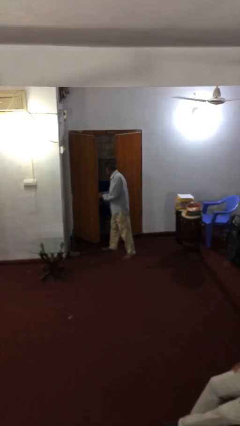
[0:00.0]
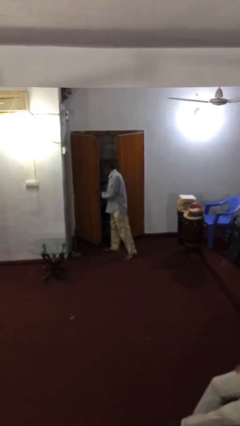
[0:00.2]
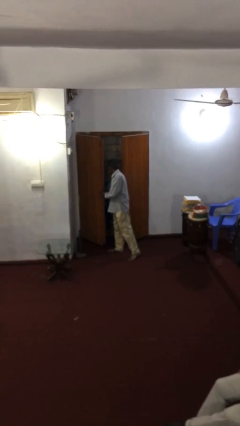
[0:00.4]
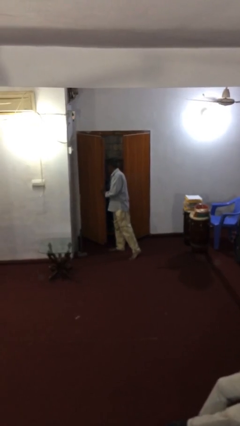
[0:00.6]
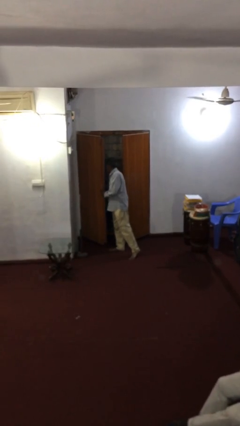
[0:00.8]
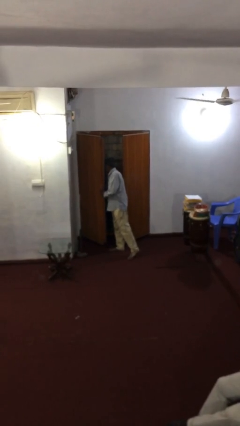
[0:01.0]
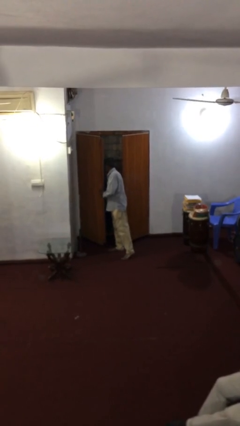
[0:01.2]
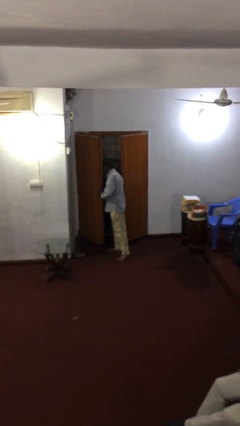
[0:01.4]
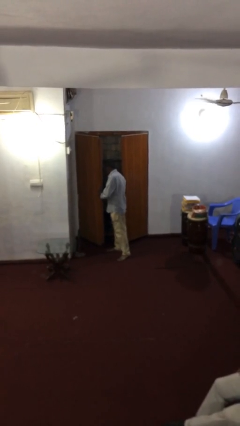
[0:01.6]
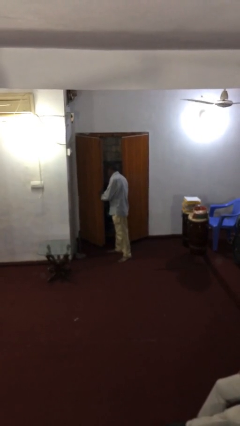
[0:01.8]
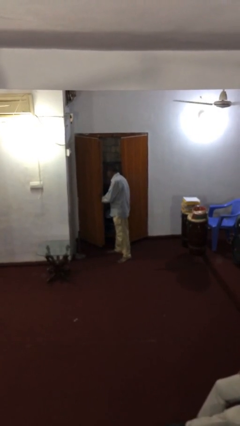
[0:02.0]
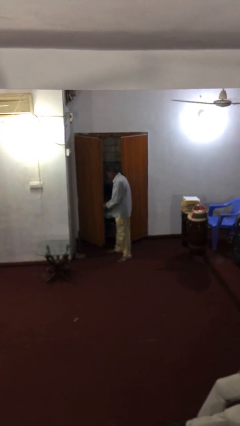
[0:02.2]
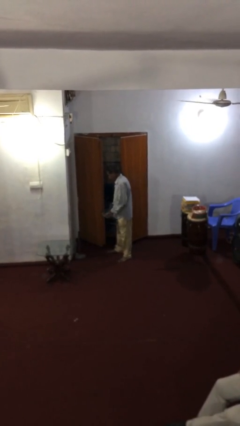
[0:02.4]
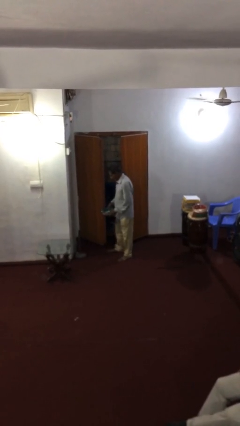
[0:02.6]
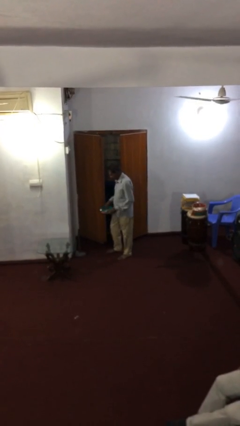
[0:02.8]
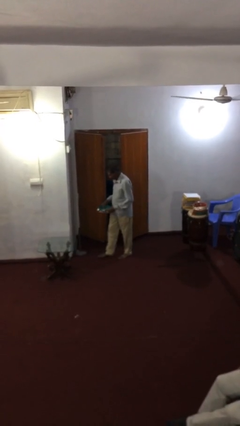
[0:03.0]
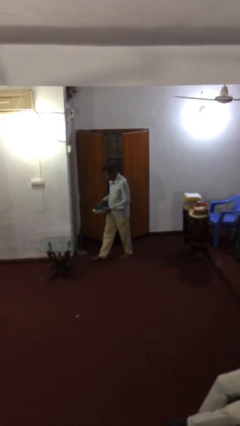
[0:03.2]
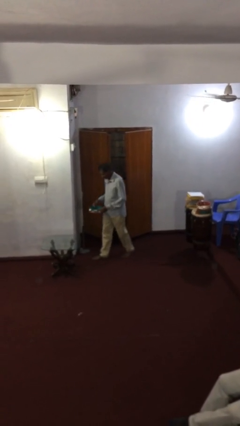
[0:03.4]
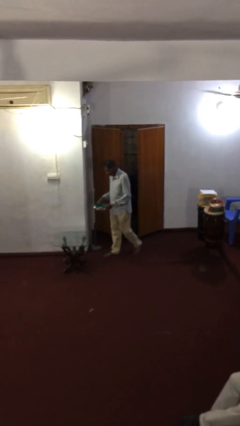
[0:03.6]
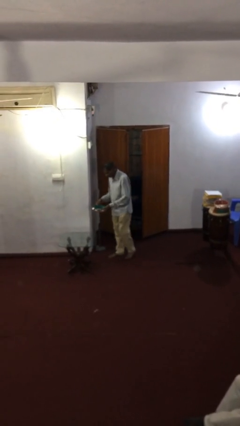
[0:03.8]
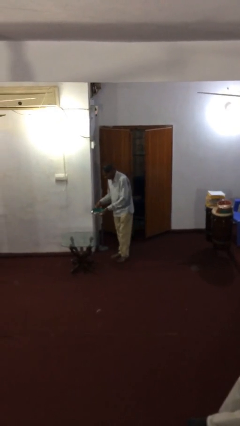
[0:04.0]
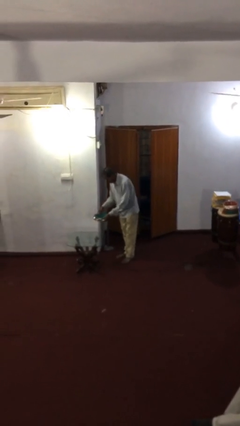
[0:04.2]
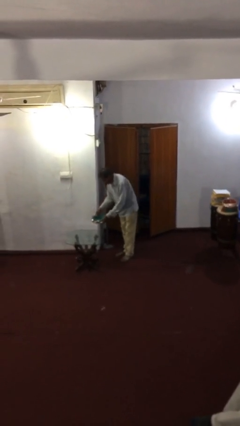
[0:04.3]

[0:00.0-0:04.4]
person picks up object from shelf

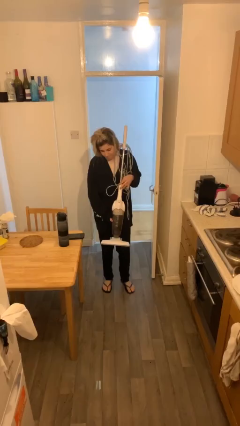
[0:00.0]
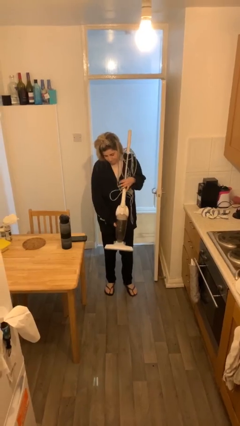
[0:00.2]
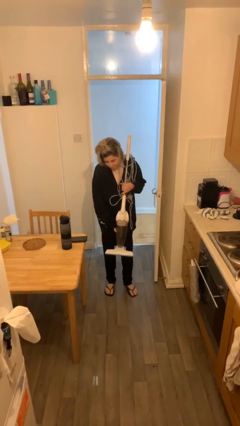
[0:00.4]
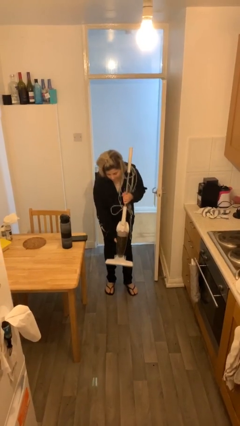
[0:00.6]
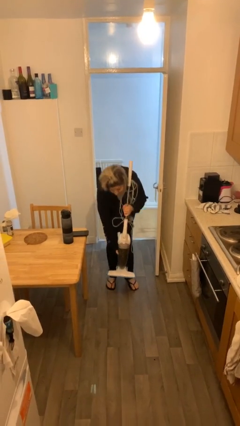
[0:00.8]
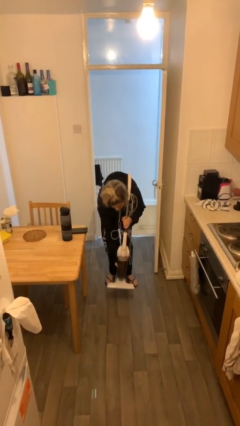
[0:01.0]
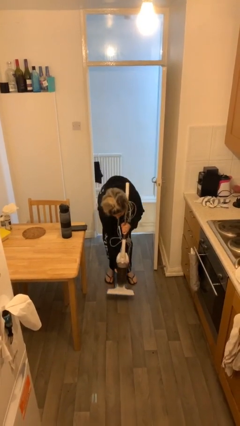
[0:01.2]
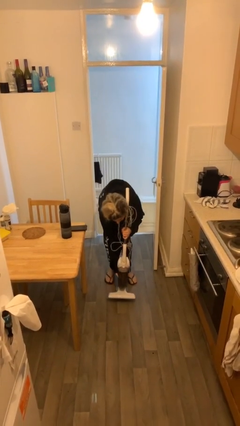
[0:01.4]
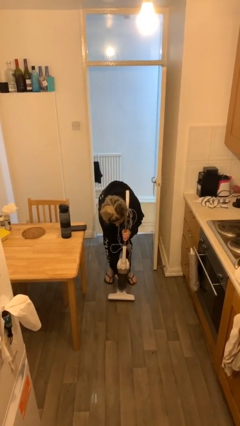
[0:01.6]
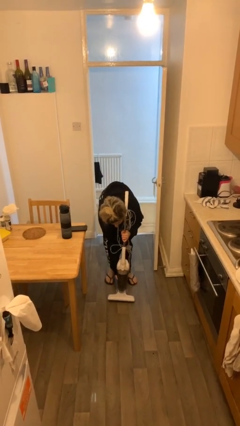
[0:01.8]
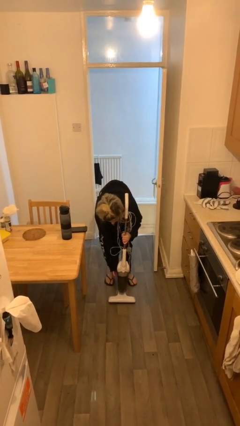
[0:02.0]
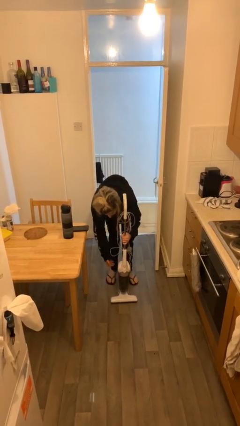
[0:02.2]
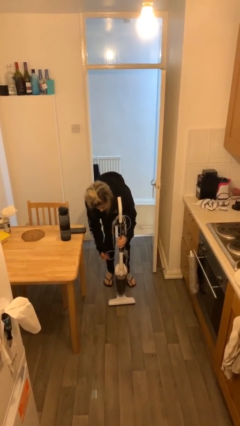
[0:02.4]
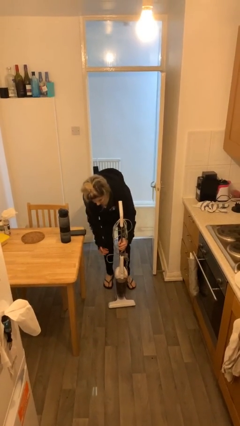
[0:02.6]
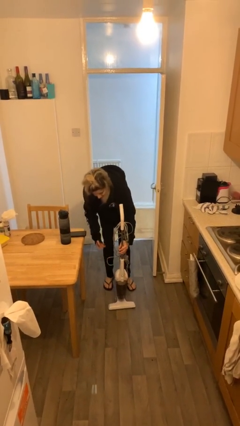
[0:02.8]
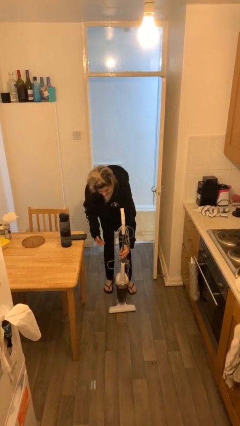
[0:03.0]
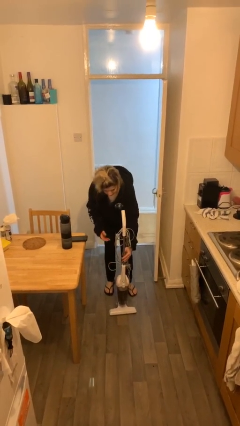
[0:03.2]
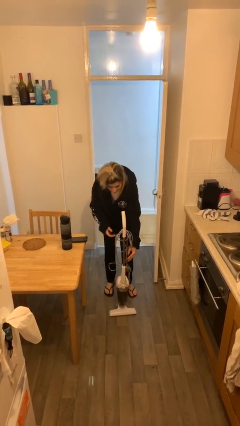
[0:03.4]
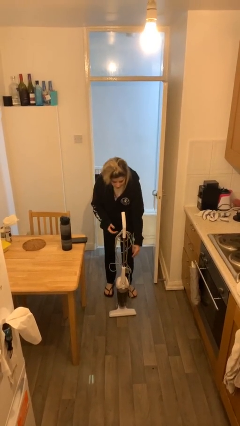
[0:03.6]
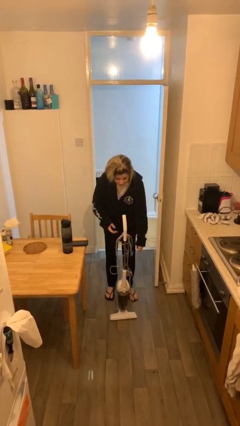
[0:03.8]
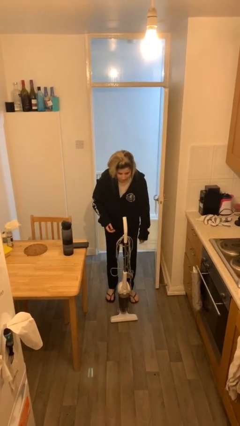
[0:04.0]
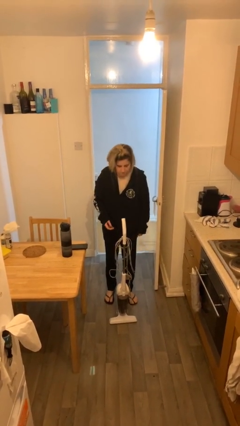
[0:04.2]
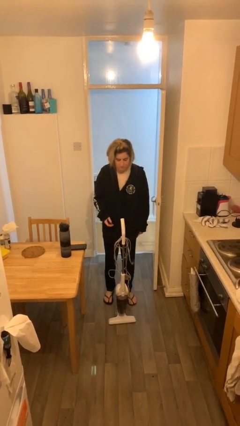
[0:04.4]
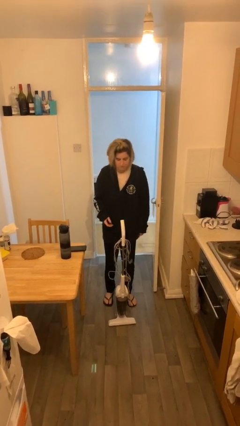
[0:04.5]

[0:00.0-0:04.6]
person puts down object on floor

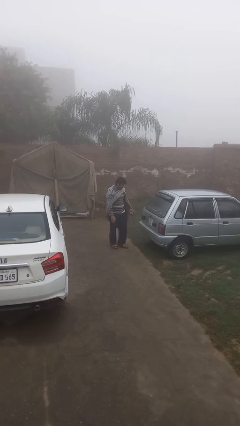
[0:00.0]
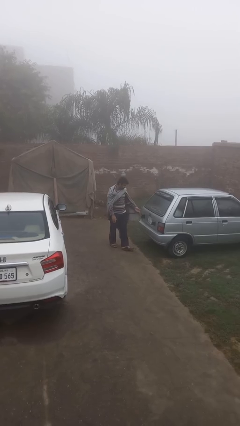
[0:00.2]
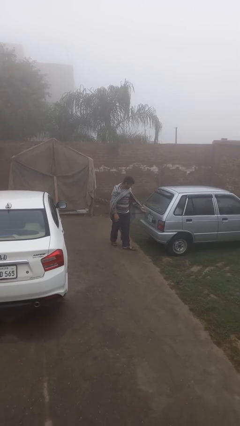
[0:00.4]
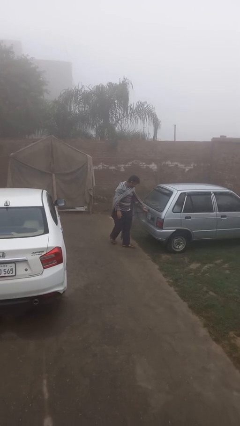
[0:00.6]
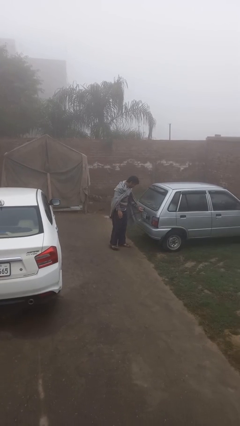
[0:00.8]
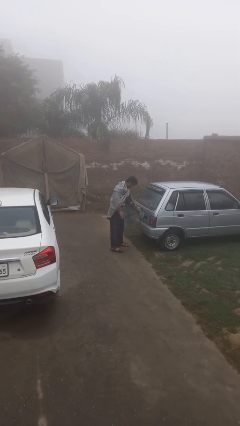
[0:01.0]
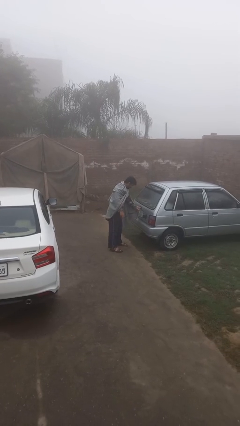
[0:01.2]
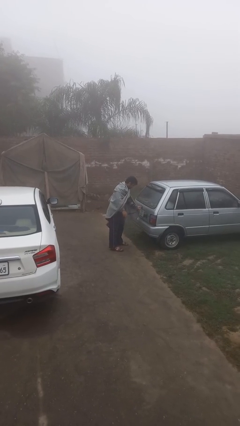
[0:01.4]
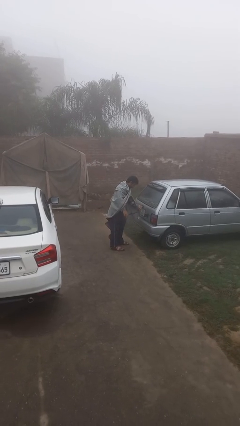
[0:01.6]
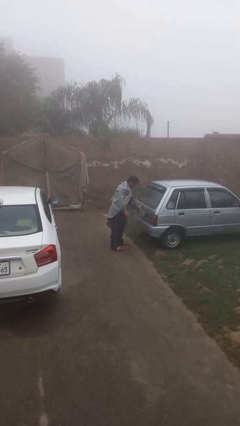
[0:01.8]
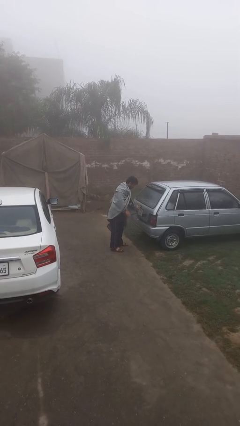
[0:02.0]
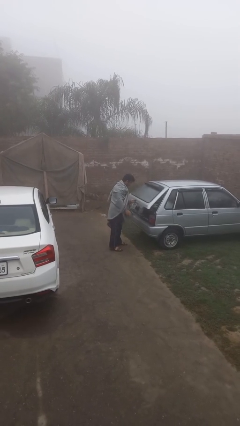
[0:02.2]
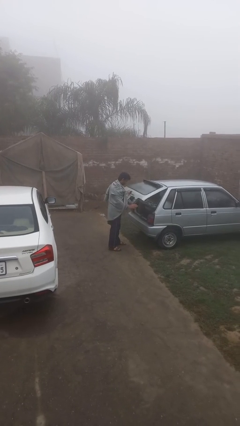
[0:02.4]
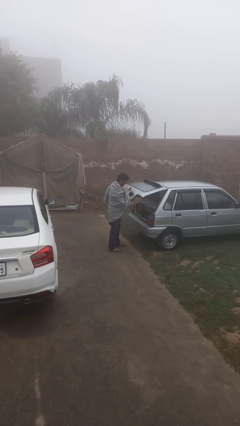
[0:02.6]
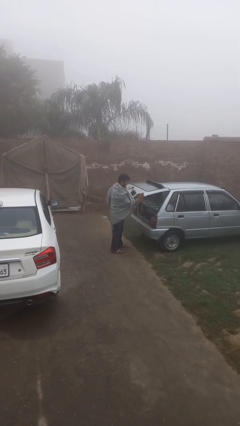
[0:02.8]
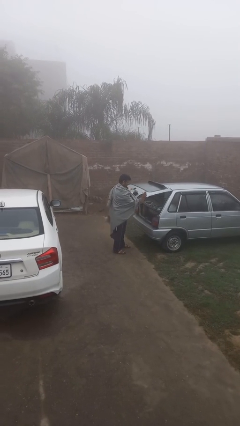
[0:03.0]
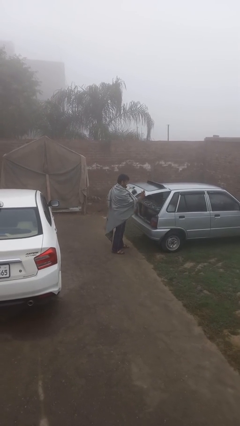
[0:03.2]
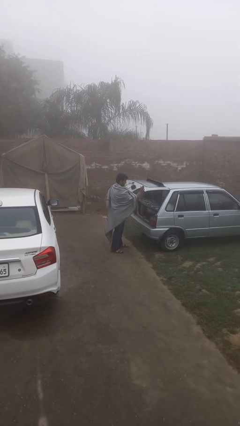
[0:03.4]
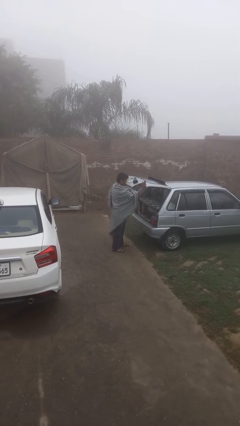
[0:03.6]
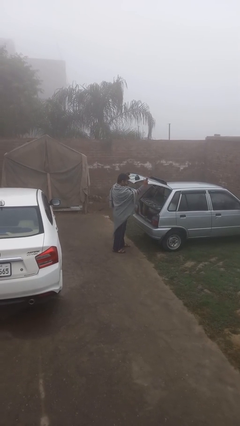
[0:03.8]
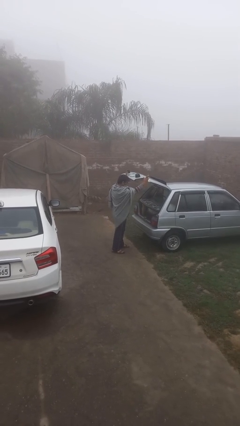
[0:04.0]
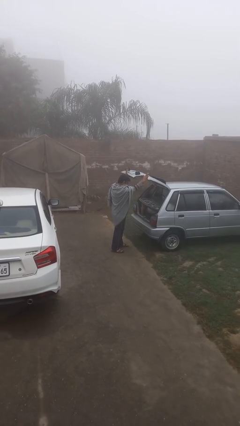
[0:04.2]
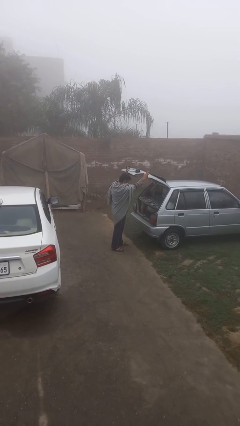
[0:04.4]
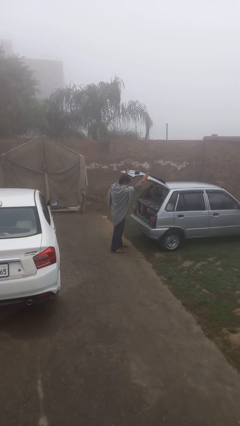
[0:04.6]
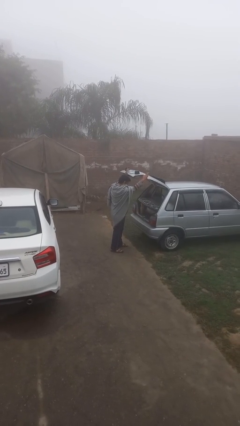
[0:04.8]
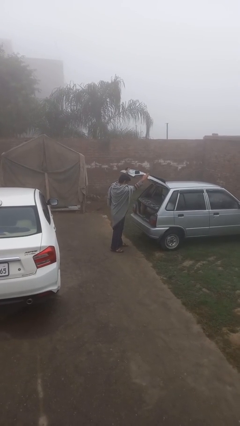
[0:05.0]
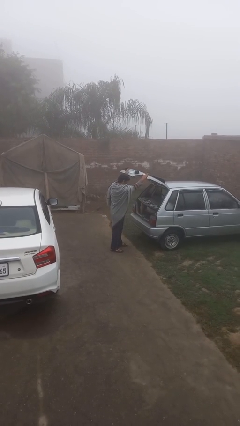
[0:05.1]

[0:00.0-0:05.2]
person opens car trunk

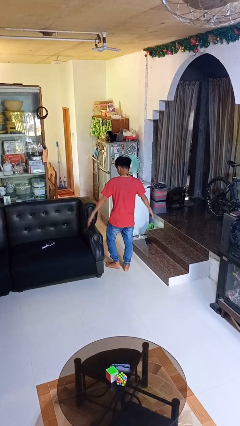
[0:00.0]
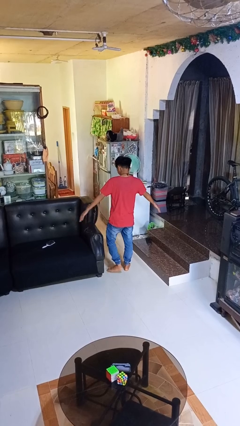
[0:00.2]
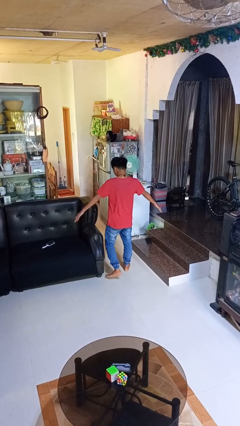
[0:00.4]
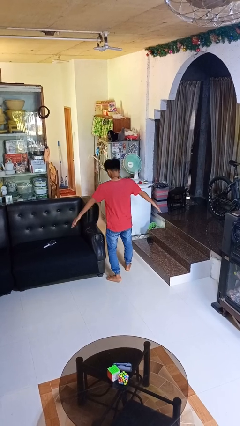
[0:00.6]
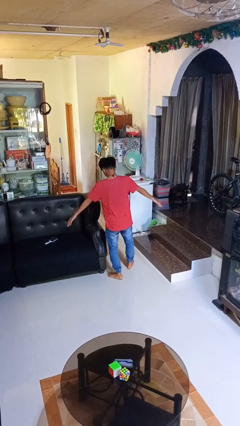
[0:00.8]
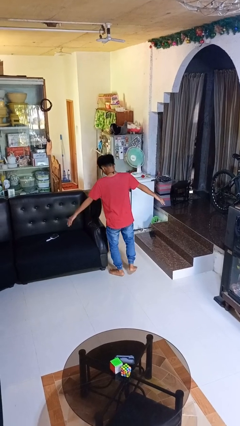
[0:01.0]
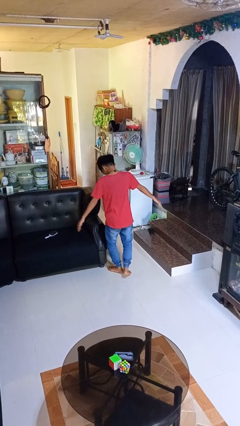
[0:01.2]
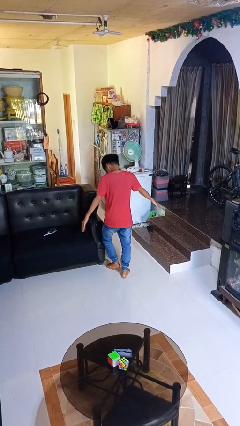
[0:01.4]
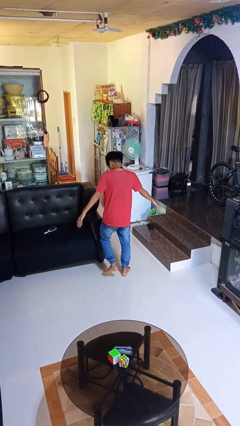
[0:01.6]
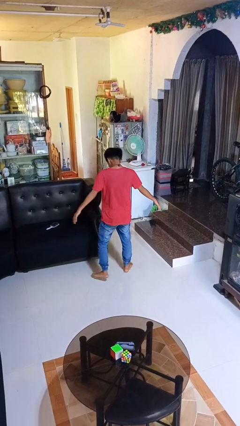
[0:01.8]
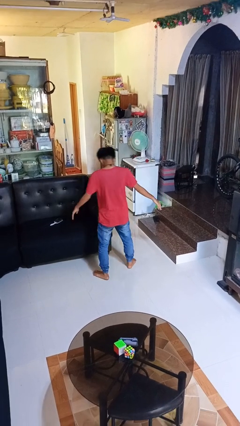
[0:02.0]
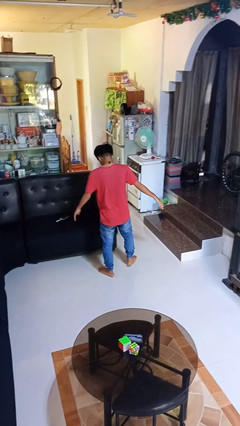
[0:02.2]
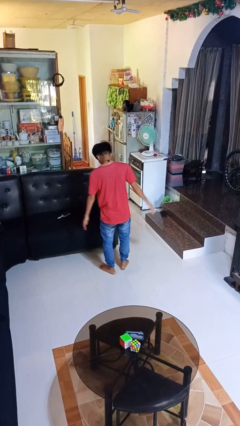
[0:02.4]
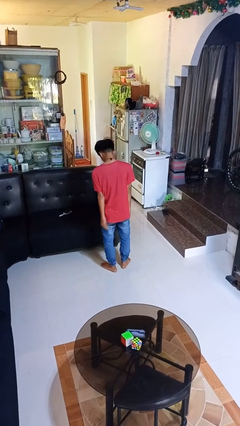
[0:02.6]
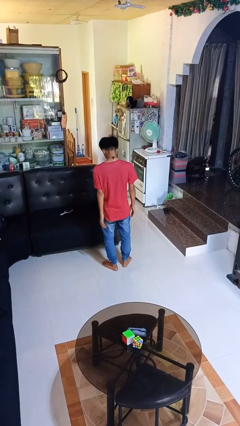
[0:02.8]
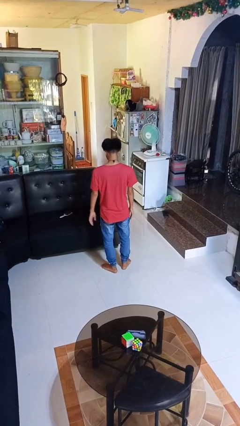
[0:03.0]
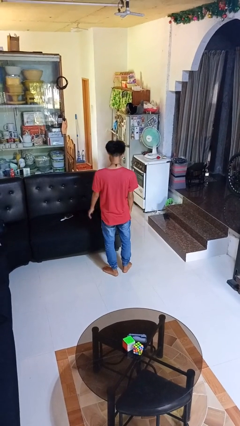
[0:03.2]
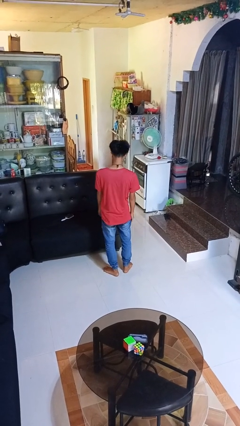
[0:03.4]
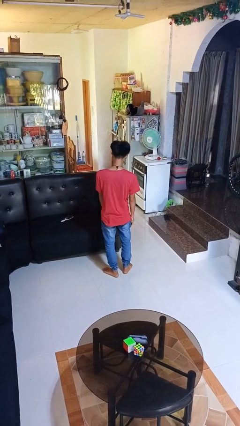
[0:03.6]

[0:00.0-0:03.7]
person picks up object from floor
